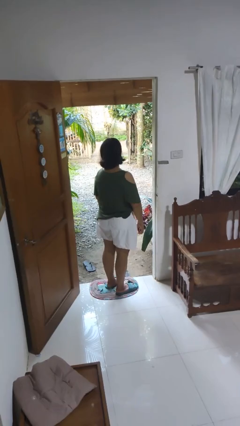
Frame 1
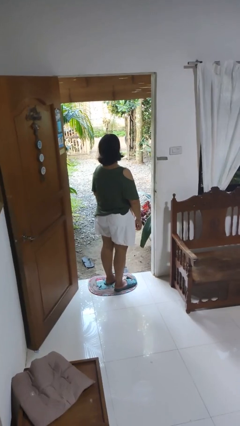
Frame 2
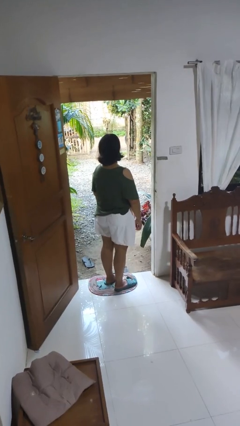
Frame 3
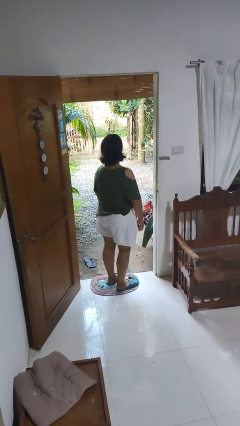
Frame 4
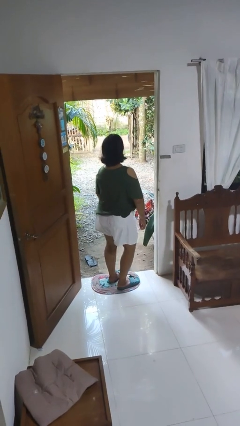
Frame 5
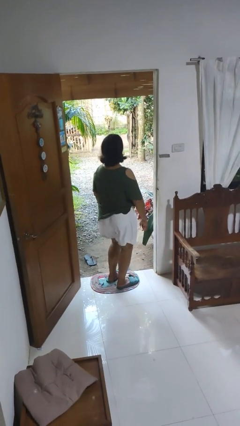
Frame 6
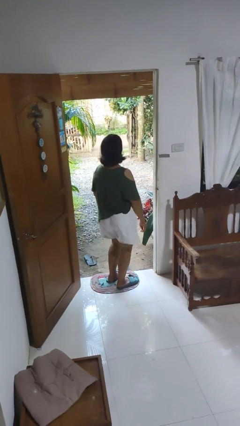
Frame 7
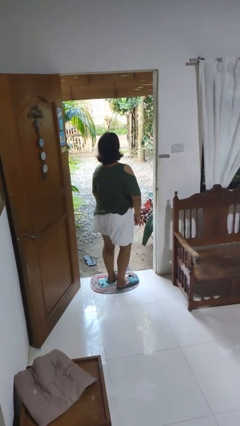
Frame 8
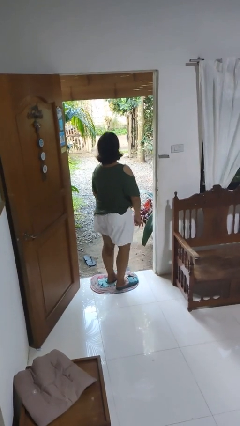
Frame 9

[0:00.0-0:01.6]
person wiggles hips

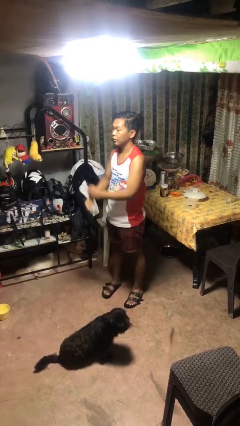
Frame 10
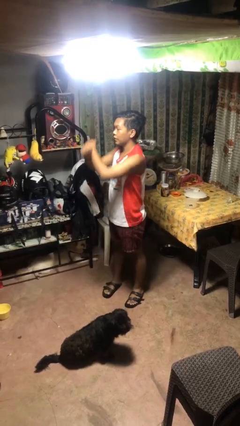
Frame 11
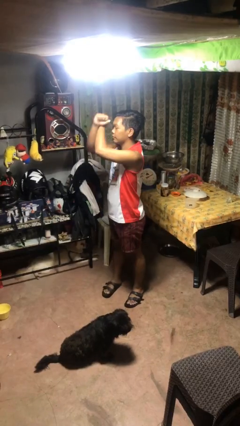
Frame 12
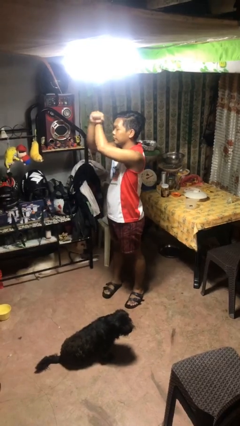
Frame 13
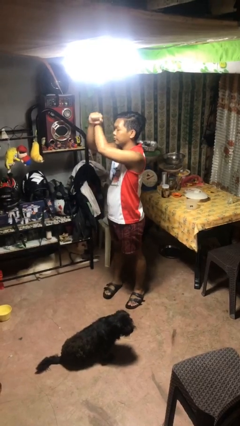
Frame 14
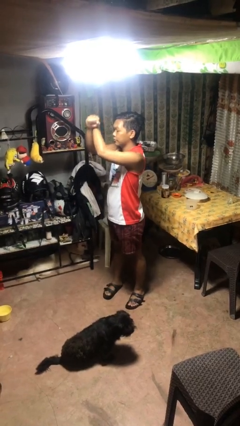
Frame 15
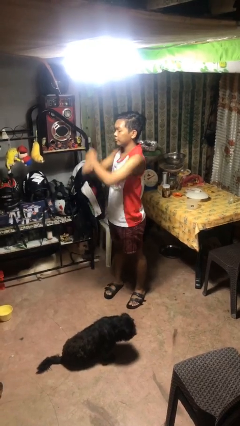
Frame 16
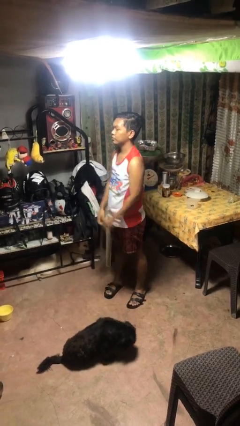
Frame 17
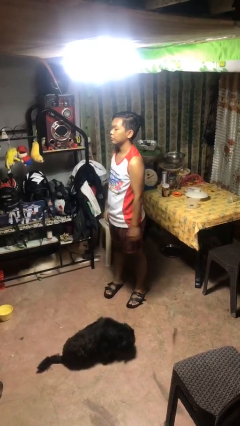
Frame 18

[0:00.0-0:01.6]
person gestures arms x

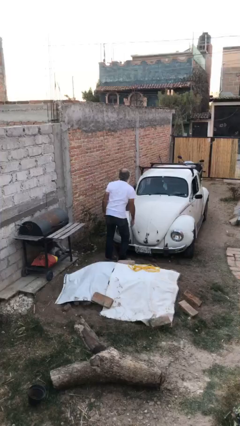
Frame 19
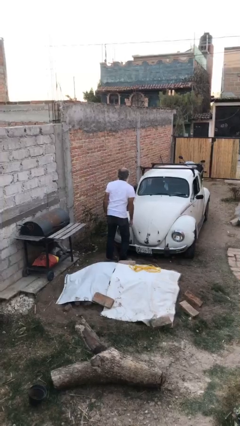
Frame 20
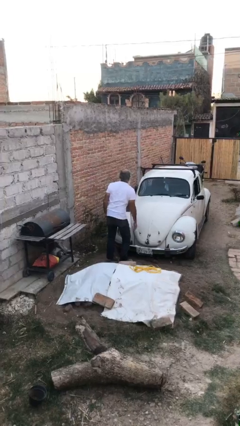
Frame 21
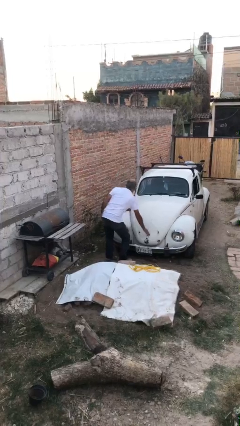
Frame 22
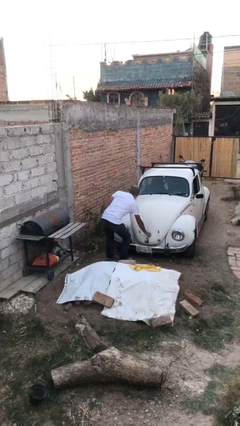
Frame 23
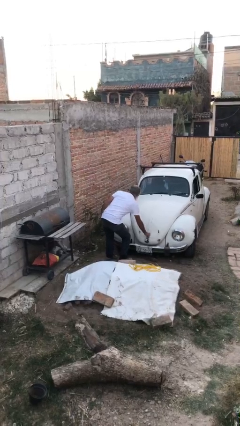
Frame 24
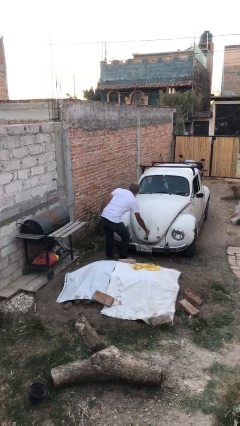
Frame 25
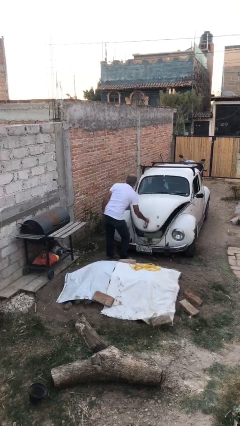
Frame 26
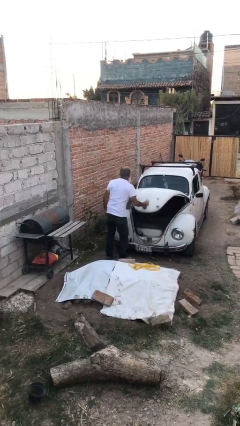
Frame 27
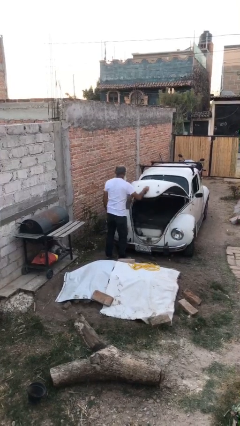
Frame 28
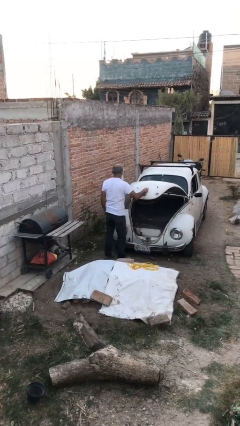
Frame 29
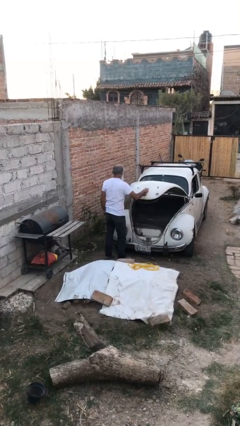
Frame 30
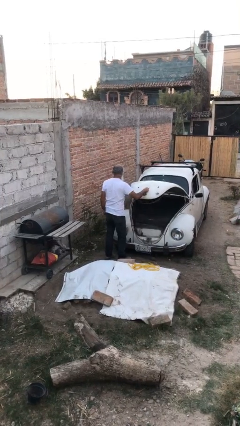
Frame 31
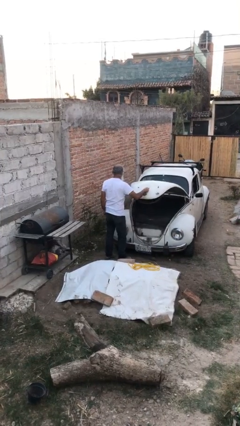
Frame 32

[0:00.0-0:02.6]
person opens car trunk

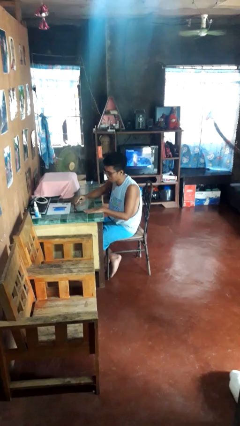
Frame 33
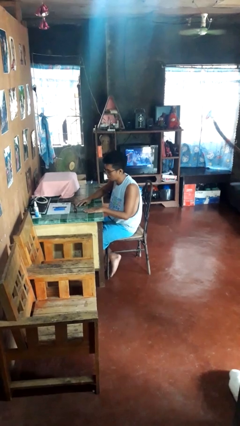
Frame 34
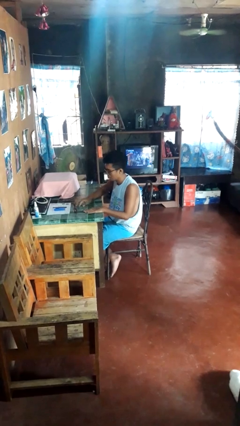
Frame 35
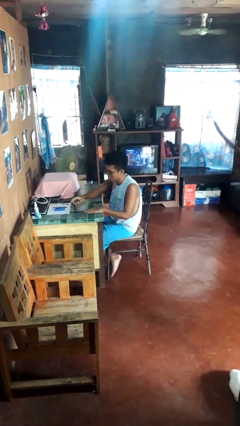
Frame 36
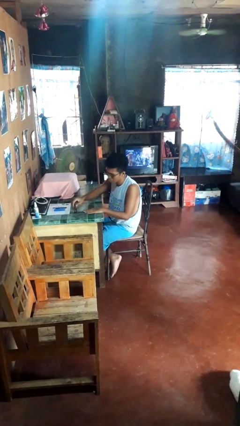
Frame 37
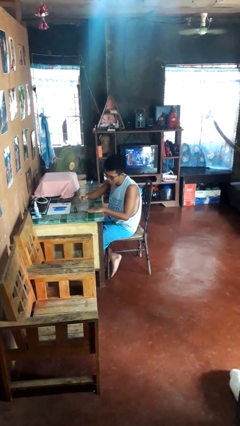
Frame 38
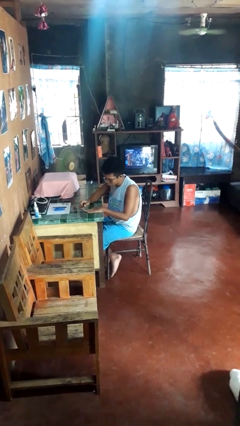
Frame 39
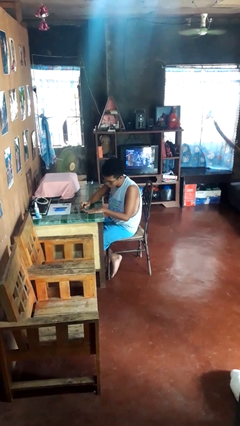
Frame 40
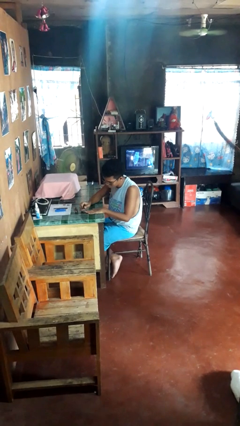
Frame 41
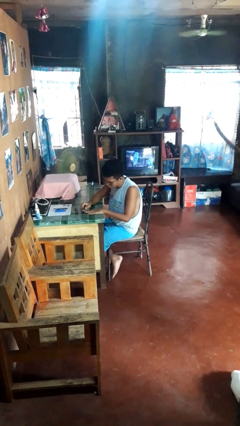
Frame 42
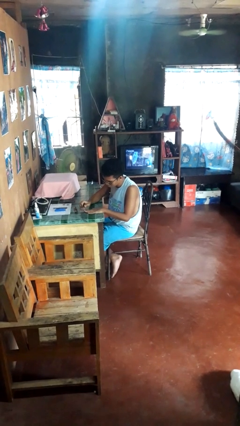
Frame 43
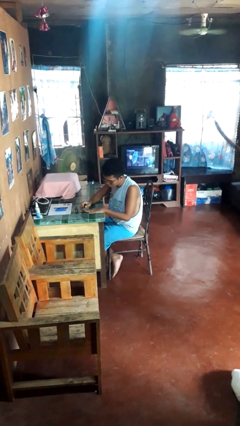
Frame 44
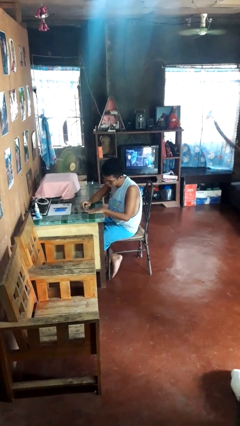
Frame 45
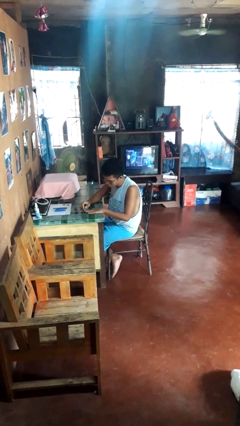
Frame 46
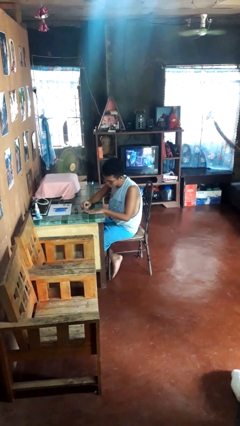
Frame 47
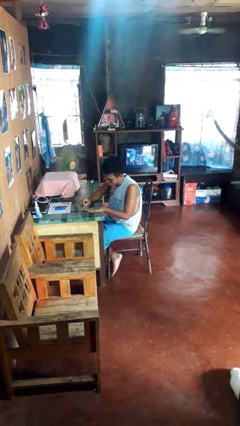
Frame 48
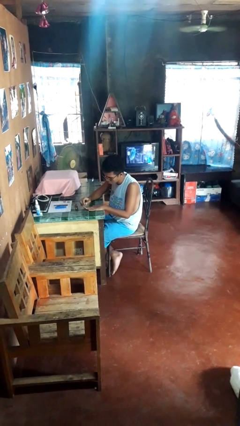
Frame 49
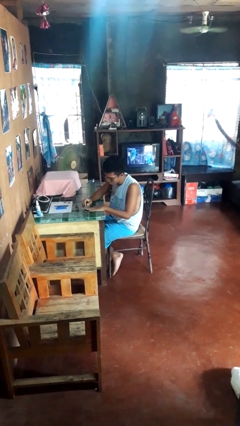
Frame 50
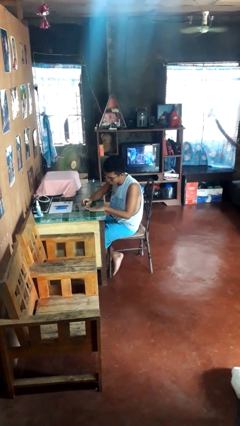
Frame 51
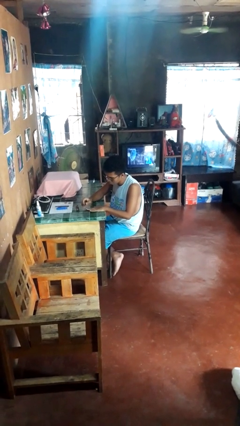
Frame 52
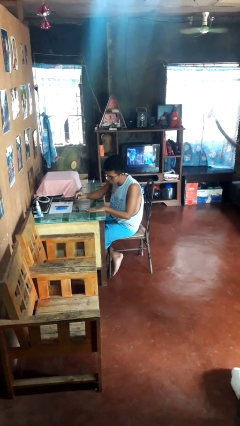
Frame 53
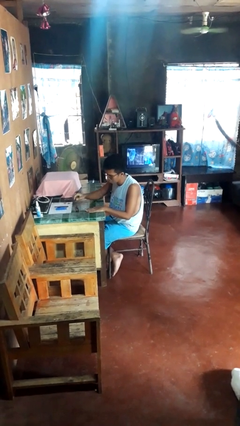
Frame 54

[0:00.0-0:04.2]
person paints fingernails

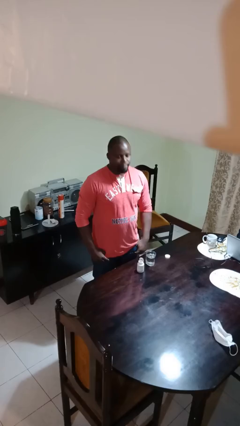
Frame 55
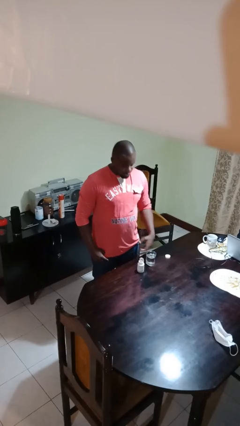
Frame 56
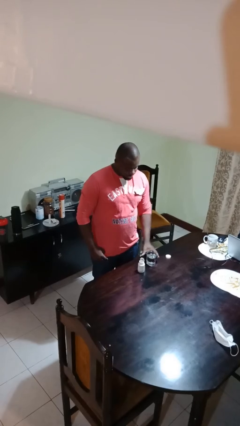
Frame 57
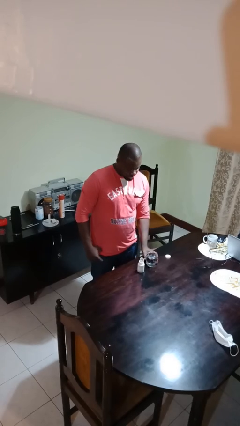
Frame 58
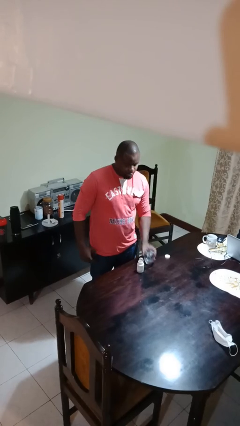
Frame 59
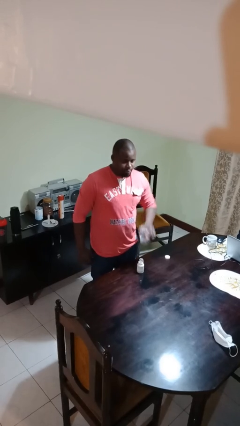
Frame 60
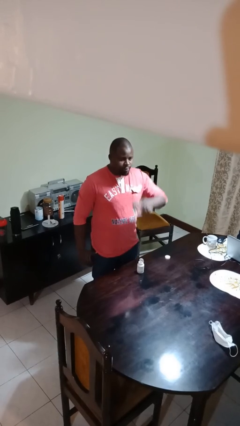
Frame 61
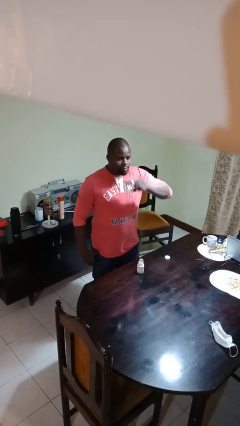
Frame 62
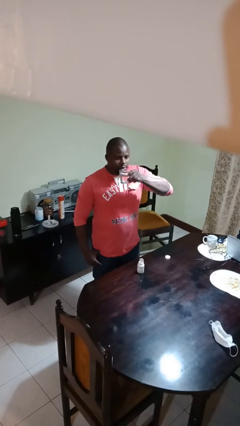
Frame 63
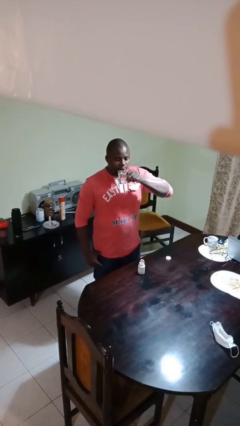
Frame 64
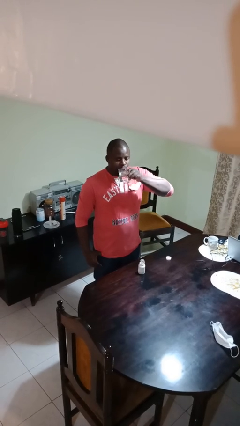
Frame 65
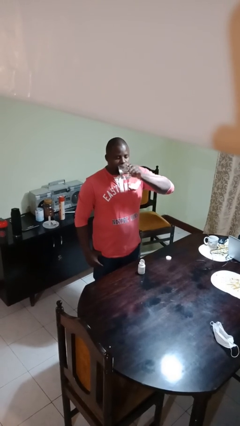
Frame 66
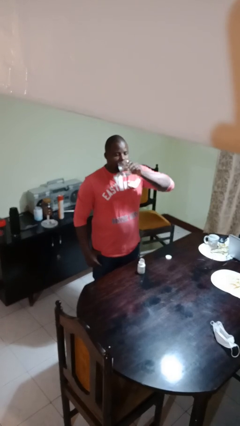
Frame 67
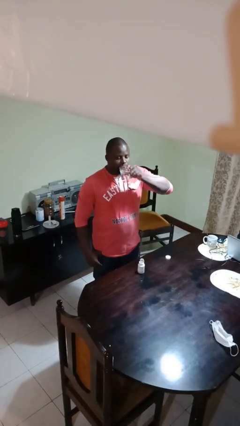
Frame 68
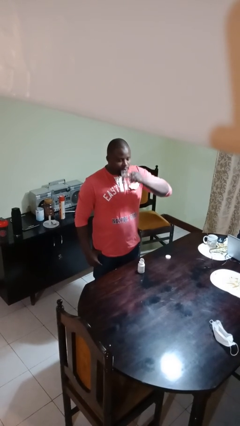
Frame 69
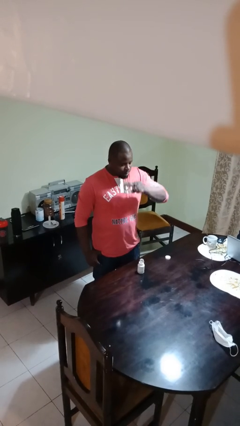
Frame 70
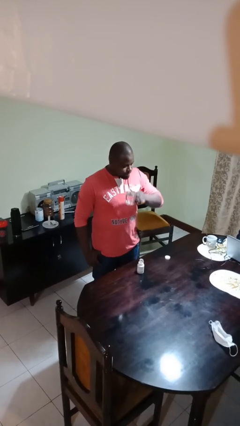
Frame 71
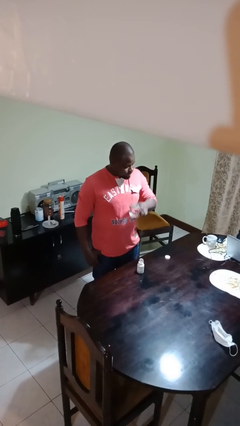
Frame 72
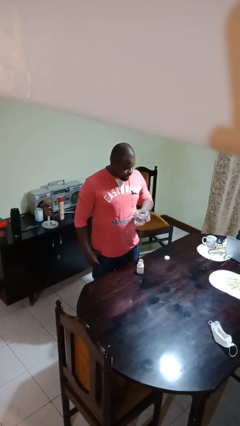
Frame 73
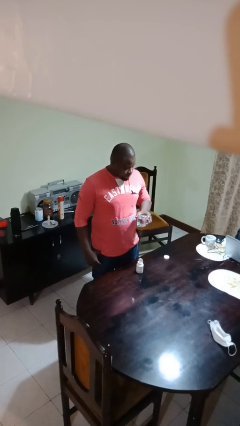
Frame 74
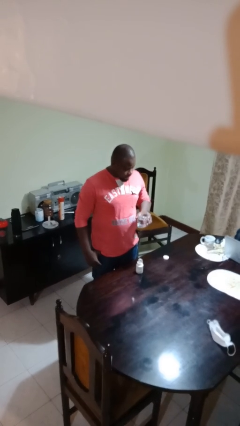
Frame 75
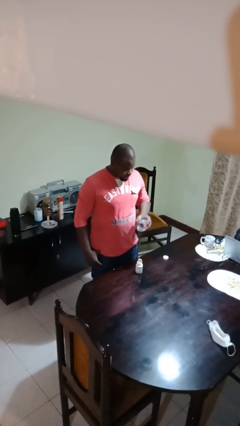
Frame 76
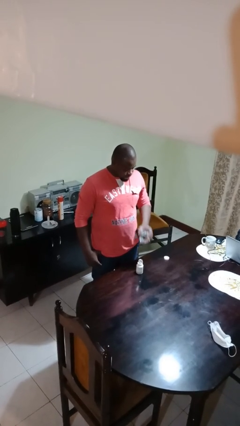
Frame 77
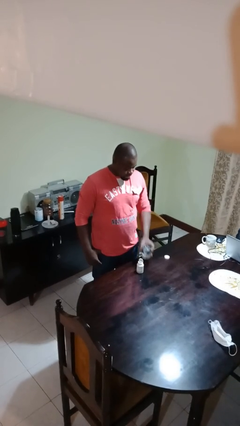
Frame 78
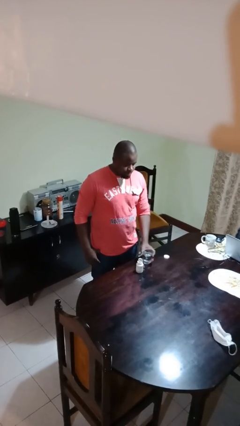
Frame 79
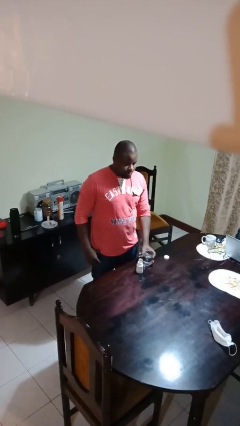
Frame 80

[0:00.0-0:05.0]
person drinks from cup

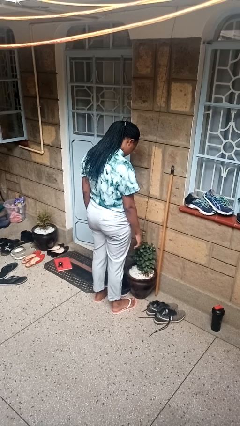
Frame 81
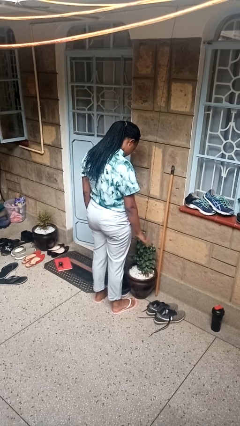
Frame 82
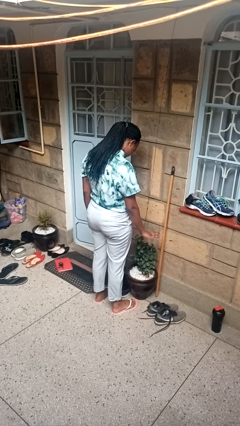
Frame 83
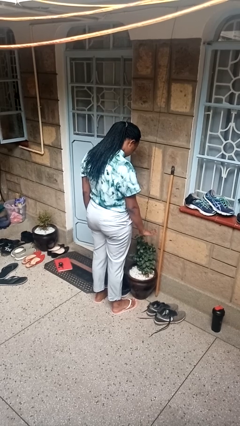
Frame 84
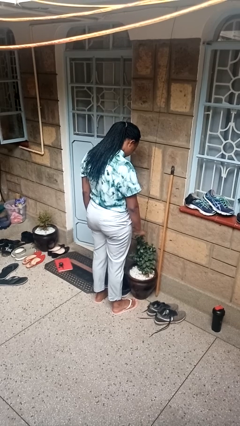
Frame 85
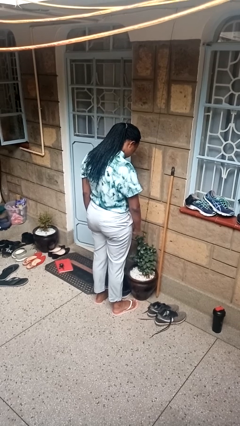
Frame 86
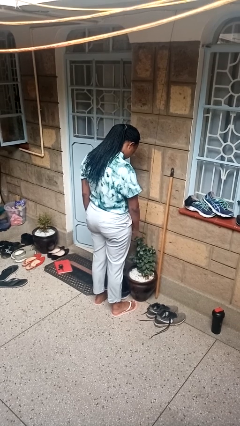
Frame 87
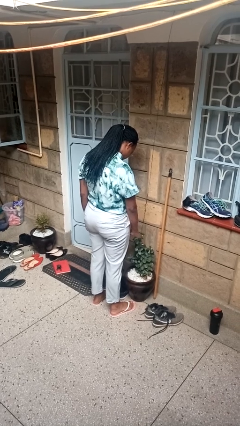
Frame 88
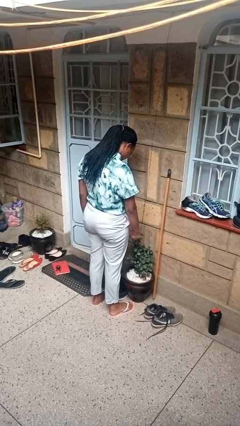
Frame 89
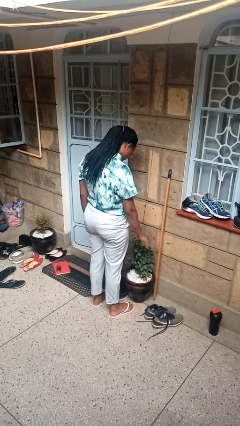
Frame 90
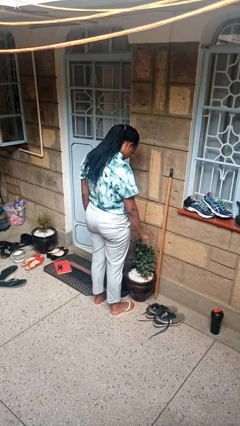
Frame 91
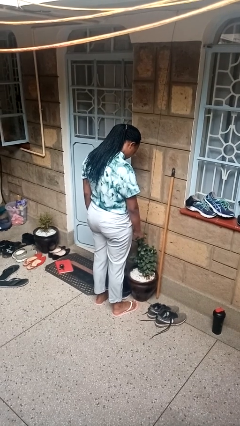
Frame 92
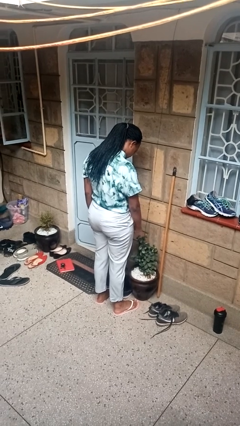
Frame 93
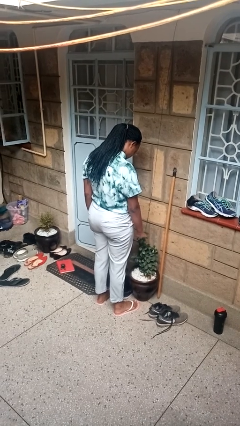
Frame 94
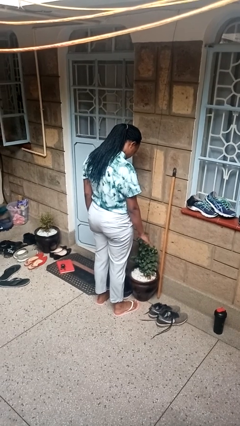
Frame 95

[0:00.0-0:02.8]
person waves hand over object
